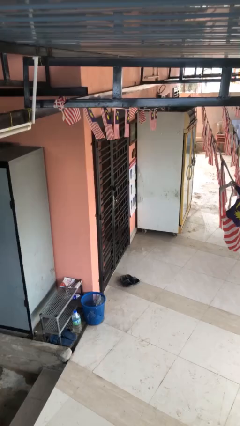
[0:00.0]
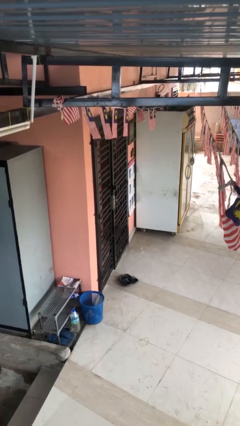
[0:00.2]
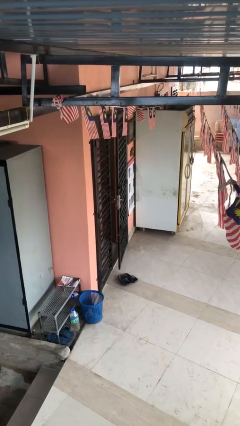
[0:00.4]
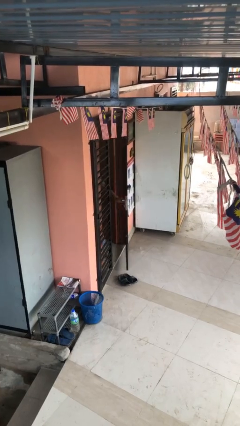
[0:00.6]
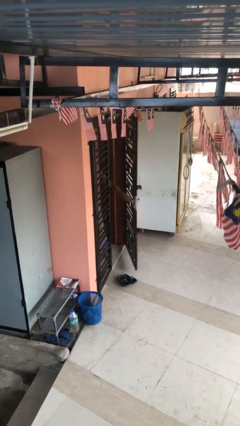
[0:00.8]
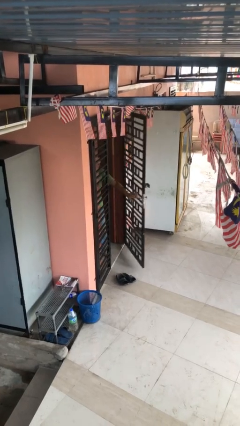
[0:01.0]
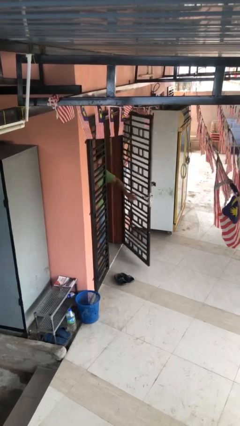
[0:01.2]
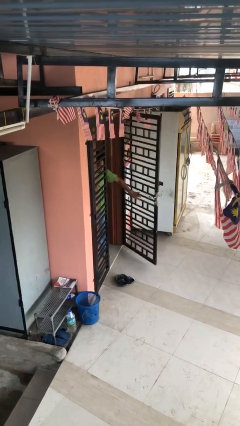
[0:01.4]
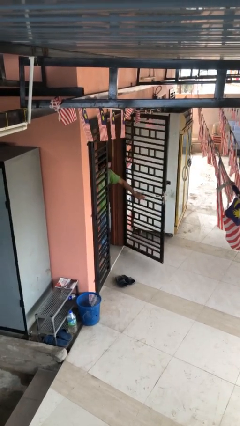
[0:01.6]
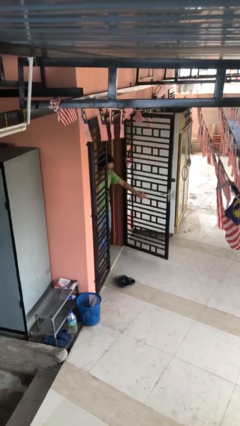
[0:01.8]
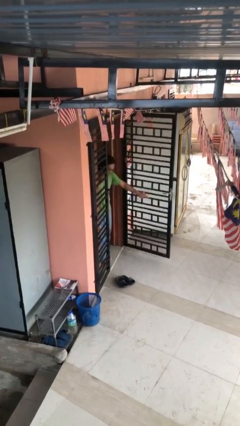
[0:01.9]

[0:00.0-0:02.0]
person opens facility door

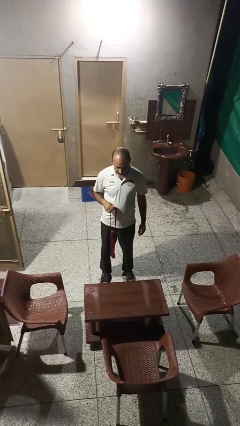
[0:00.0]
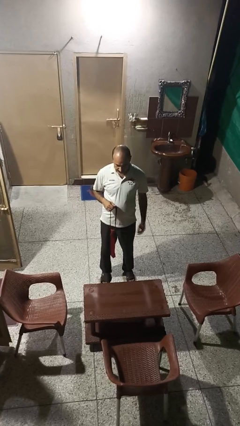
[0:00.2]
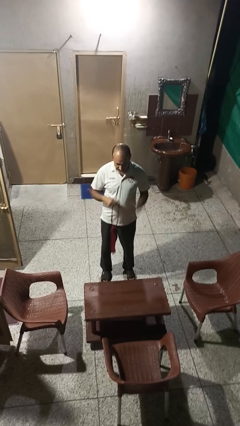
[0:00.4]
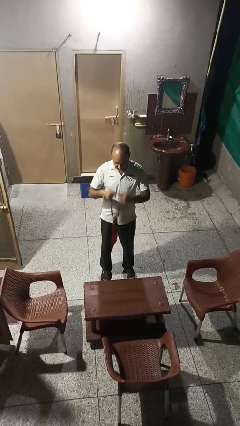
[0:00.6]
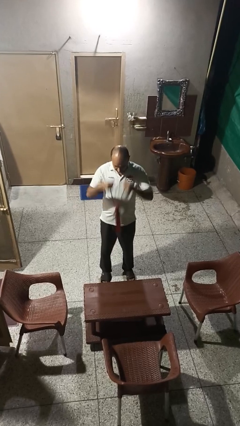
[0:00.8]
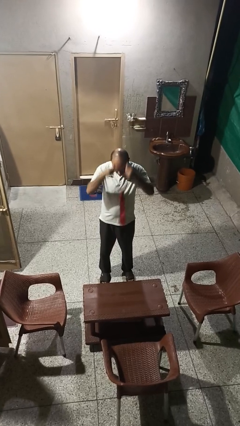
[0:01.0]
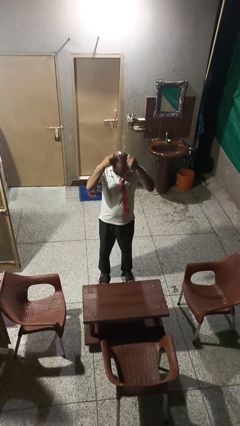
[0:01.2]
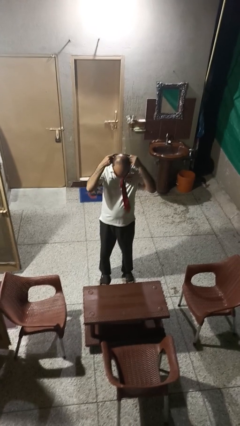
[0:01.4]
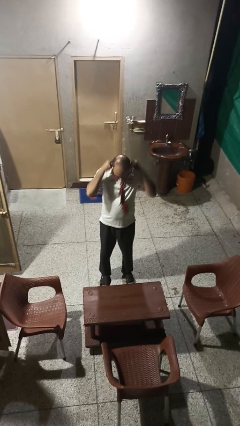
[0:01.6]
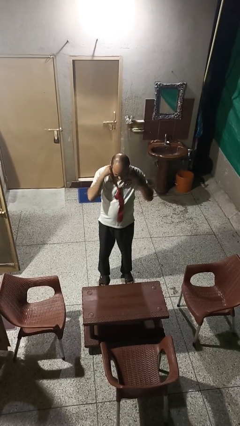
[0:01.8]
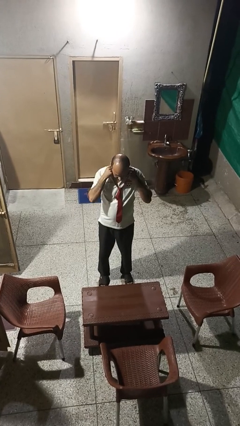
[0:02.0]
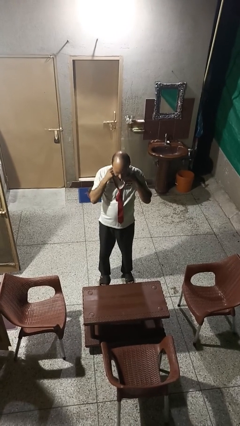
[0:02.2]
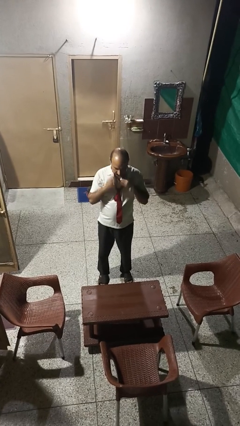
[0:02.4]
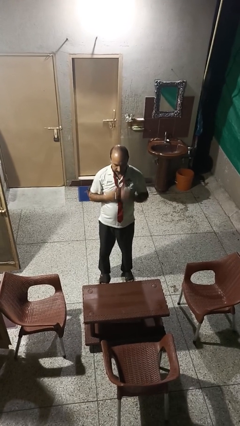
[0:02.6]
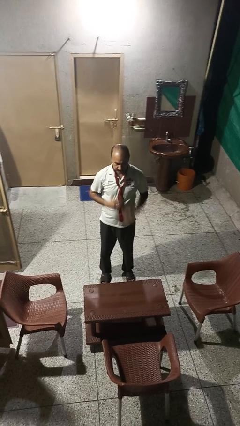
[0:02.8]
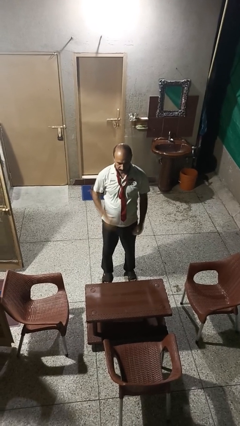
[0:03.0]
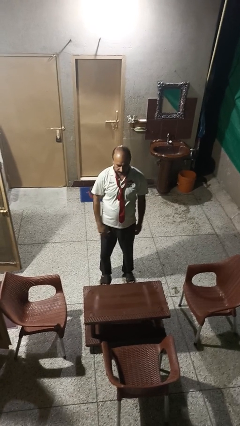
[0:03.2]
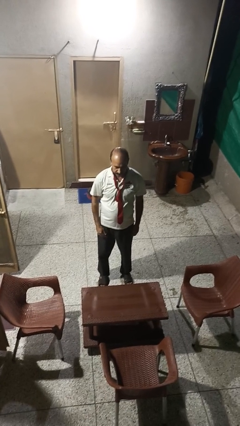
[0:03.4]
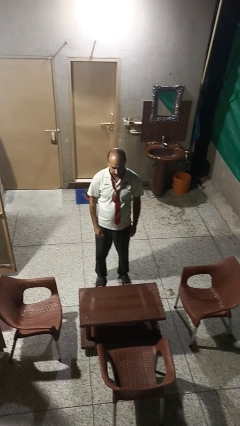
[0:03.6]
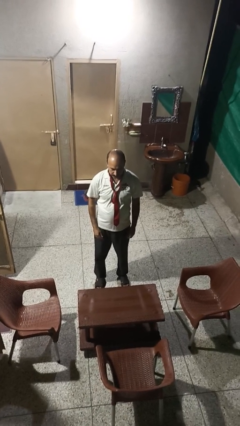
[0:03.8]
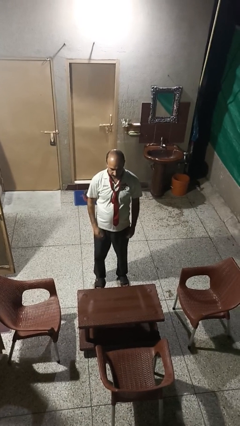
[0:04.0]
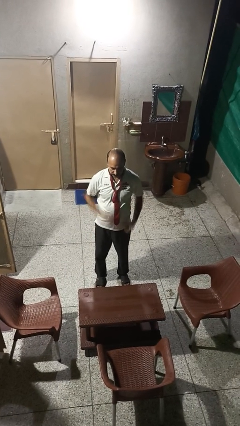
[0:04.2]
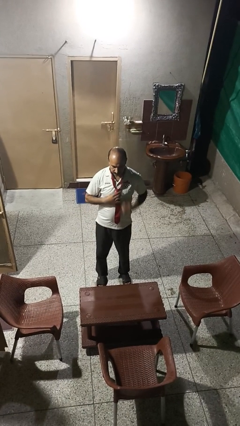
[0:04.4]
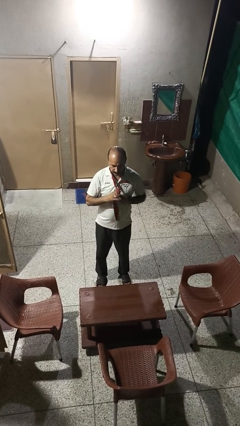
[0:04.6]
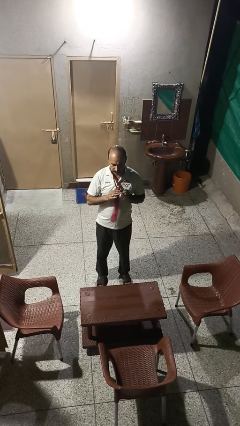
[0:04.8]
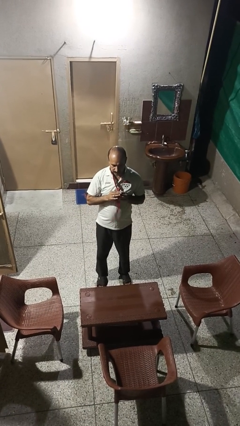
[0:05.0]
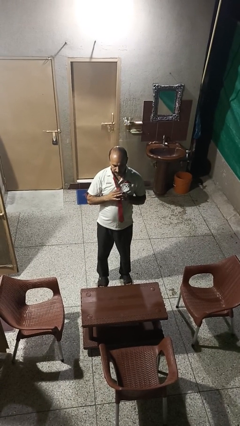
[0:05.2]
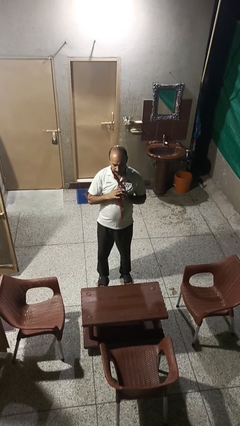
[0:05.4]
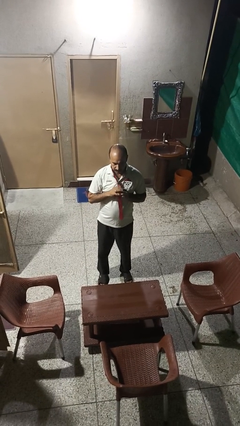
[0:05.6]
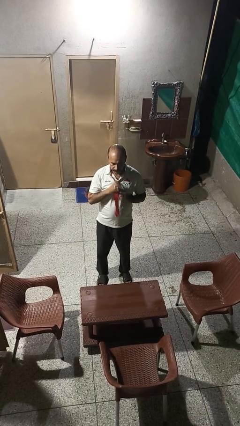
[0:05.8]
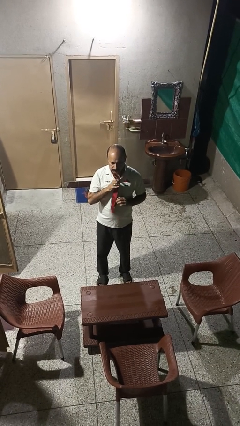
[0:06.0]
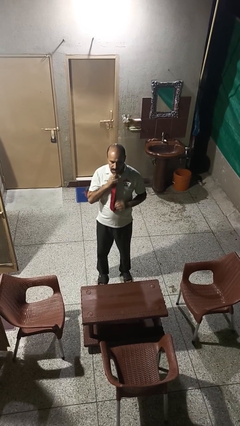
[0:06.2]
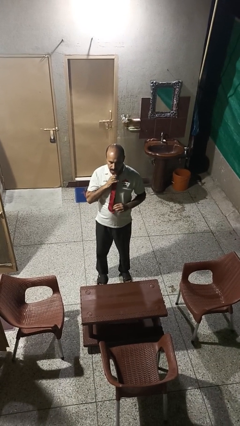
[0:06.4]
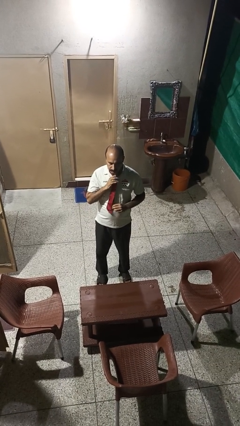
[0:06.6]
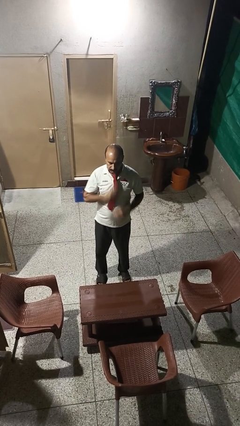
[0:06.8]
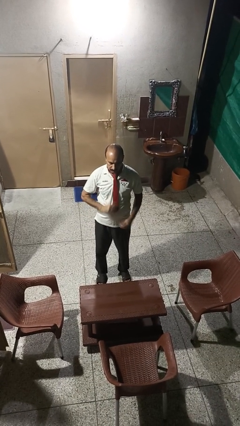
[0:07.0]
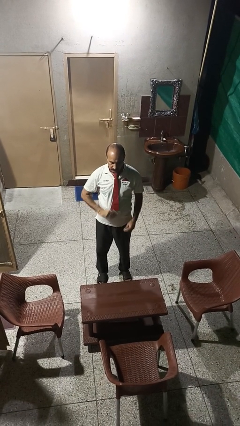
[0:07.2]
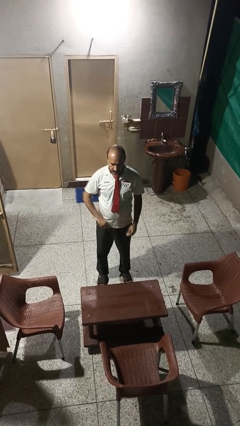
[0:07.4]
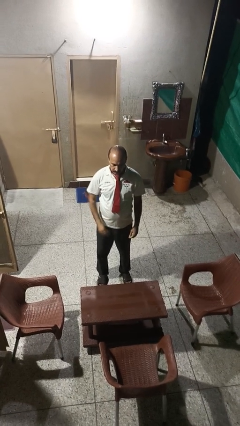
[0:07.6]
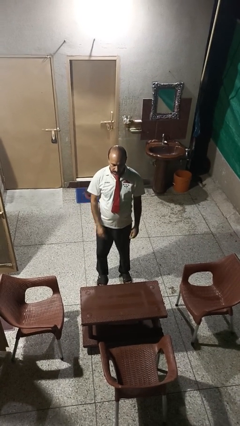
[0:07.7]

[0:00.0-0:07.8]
person puts on necktie

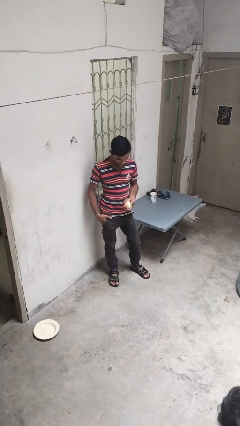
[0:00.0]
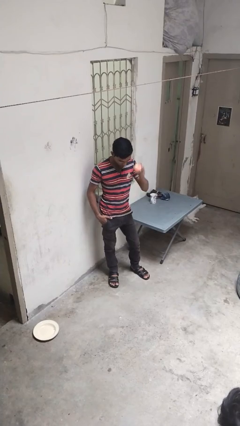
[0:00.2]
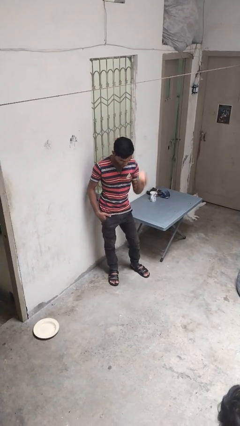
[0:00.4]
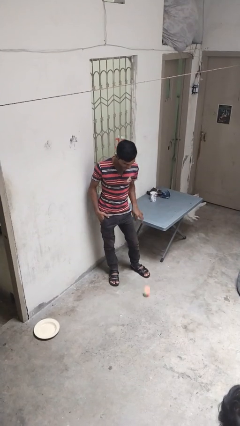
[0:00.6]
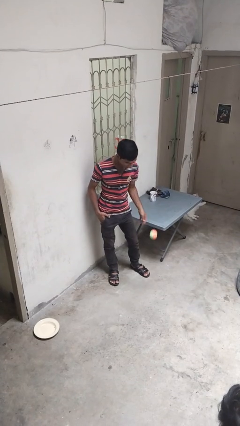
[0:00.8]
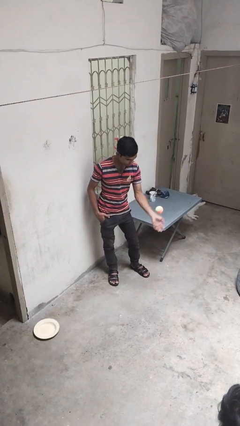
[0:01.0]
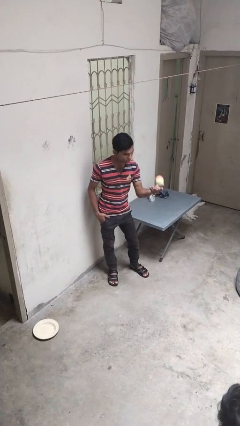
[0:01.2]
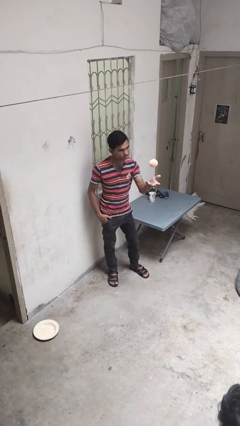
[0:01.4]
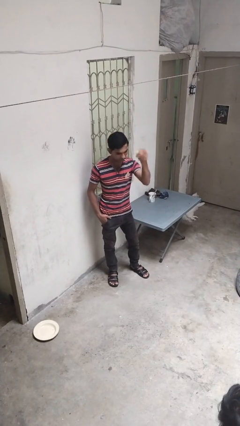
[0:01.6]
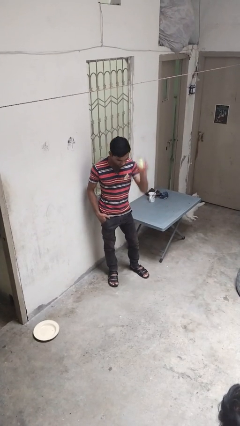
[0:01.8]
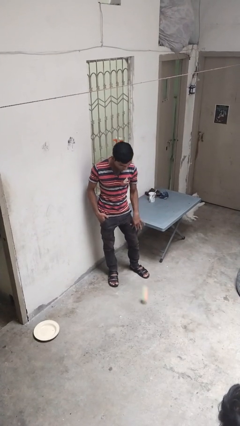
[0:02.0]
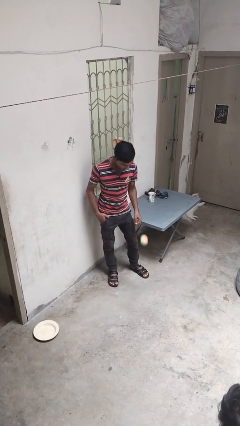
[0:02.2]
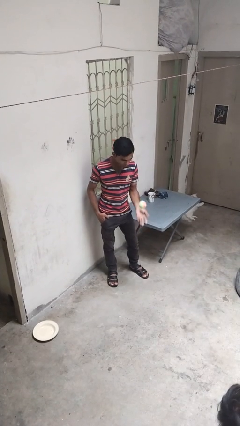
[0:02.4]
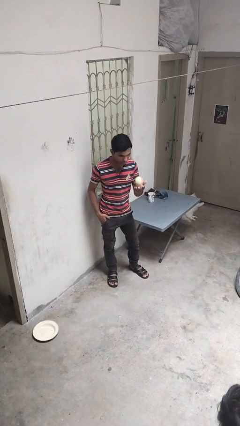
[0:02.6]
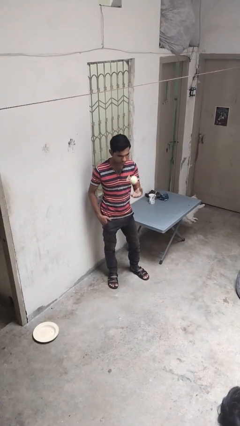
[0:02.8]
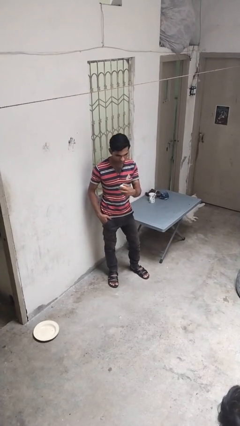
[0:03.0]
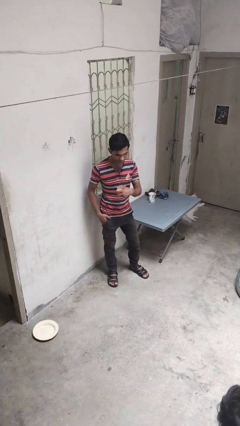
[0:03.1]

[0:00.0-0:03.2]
person bounces ball on floor

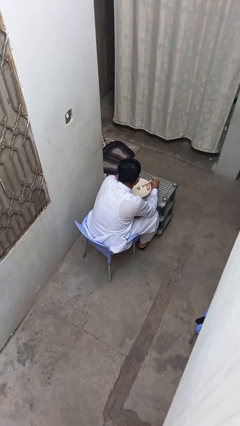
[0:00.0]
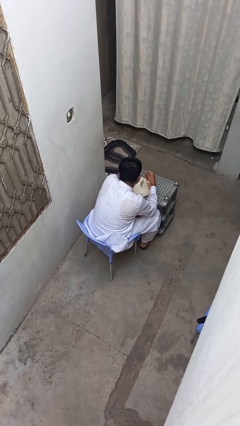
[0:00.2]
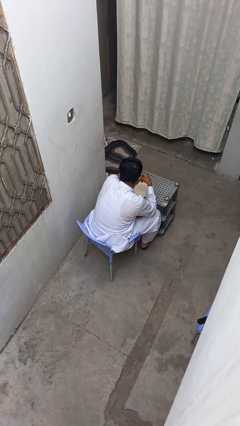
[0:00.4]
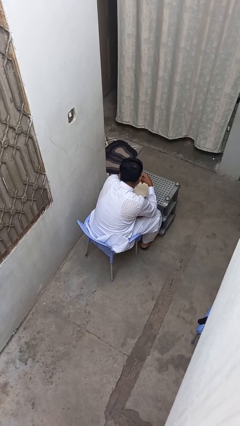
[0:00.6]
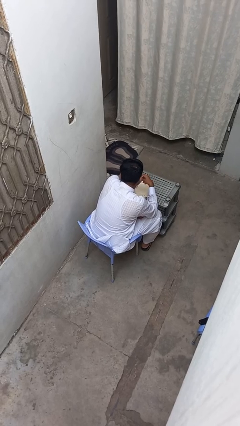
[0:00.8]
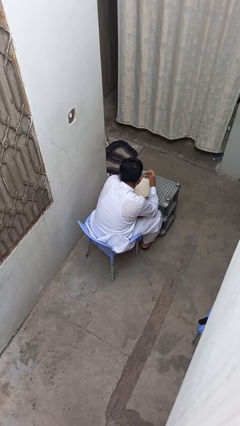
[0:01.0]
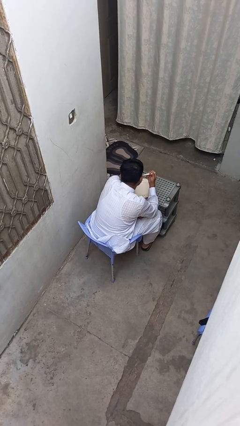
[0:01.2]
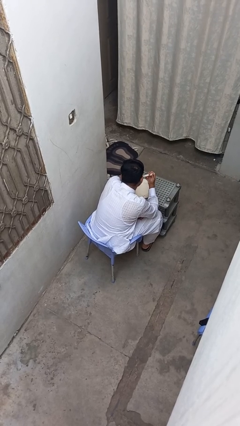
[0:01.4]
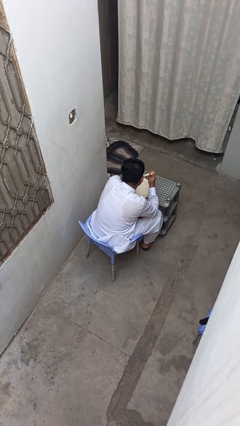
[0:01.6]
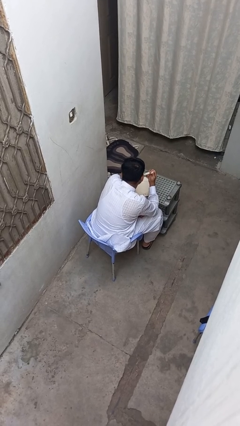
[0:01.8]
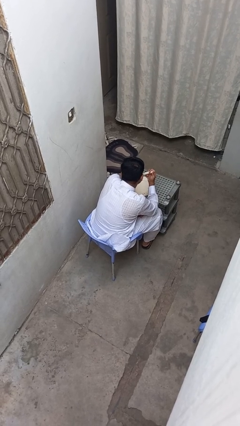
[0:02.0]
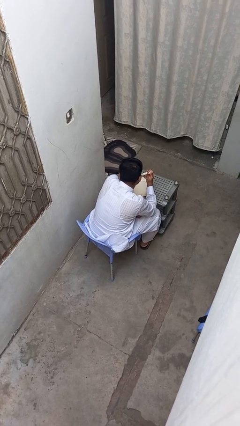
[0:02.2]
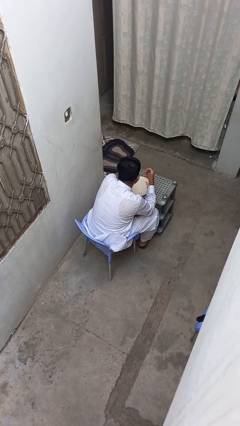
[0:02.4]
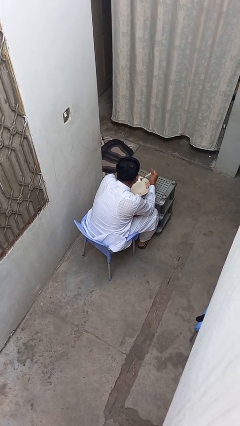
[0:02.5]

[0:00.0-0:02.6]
person eats with utensil

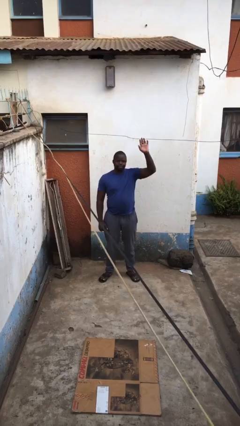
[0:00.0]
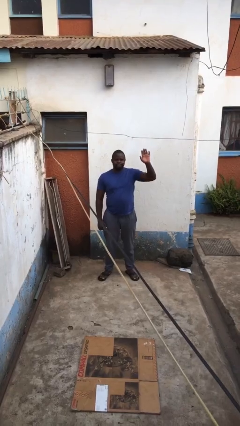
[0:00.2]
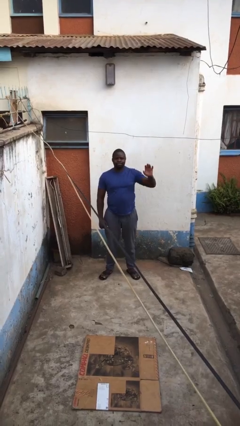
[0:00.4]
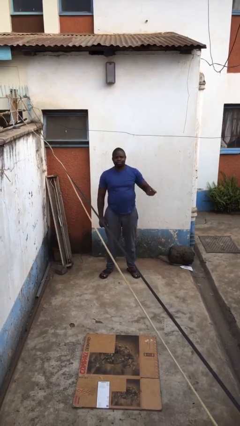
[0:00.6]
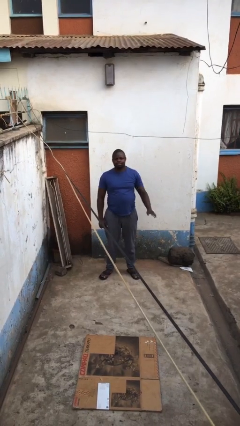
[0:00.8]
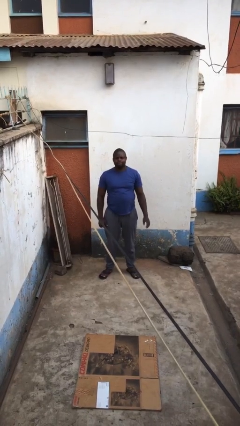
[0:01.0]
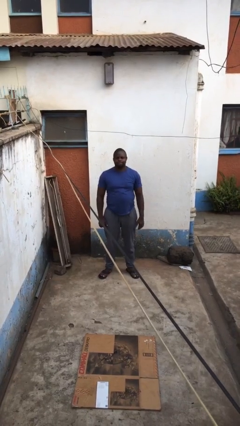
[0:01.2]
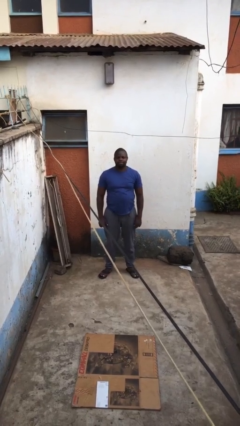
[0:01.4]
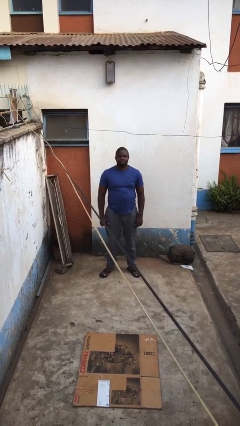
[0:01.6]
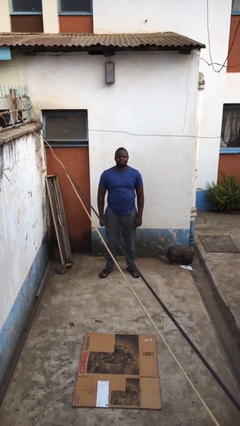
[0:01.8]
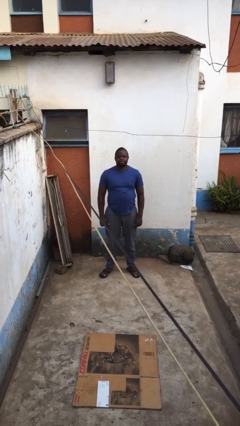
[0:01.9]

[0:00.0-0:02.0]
person gestures lower hand
